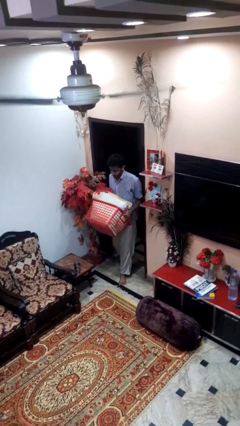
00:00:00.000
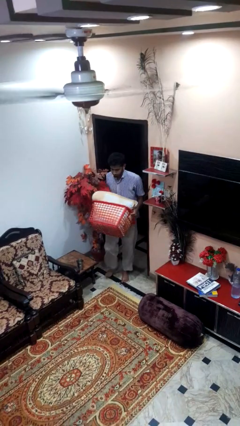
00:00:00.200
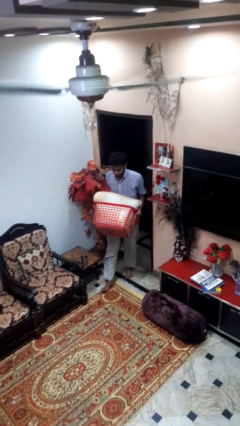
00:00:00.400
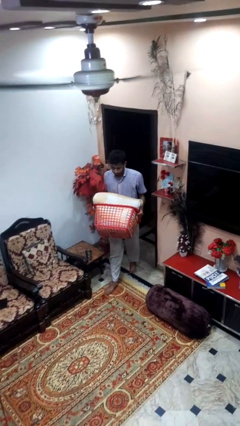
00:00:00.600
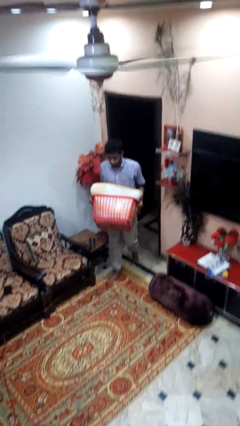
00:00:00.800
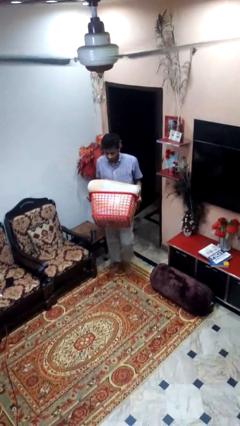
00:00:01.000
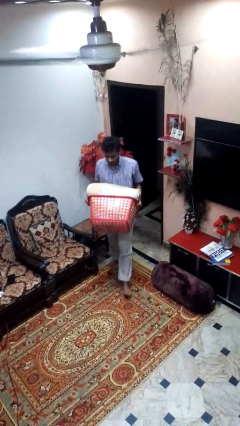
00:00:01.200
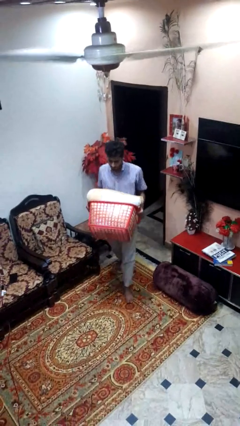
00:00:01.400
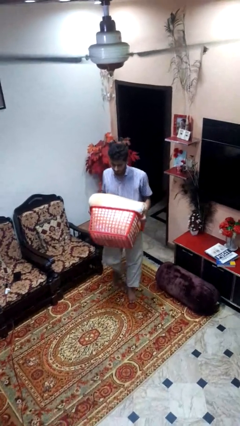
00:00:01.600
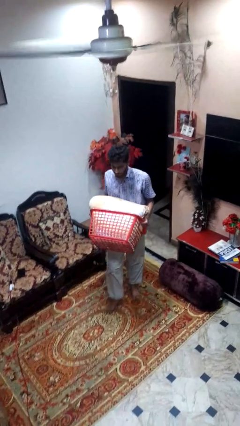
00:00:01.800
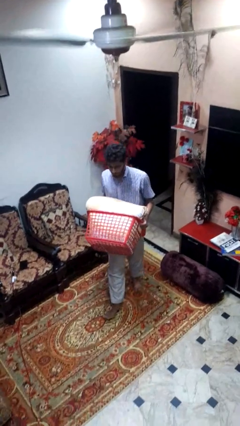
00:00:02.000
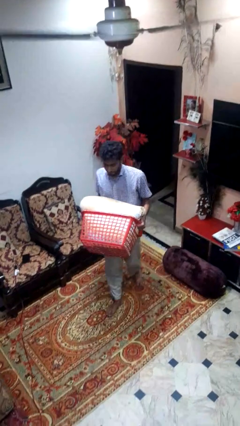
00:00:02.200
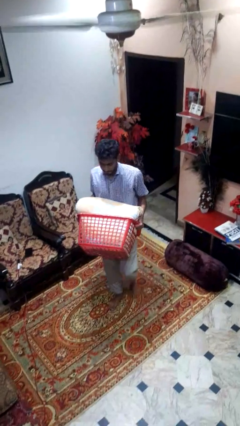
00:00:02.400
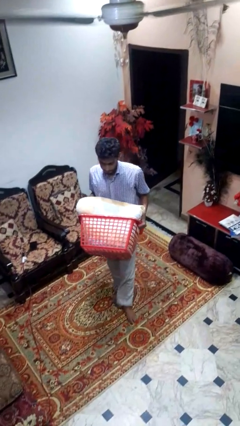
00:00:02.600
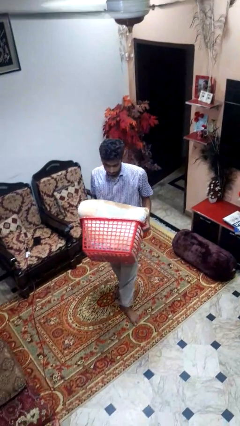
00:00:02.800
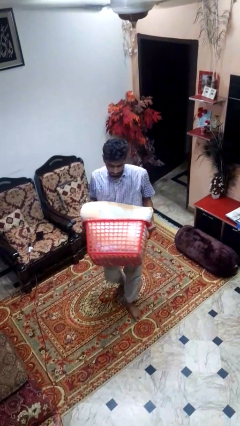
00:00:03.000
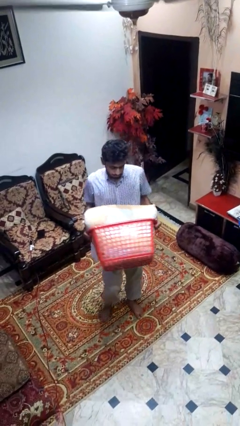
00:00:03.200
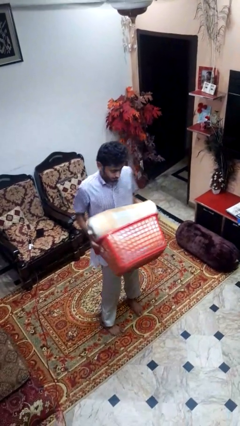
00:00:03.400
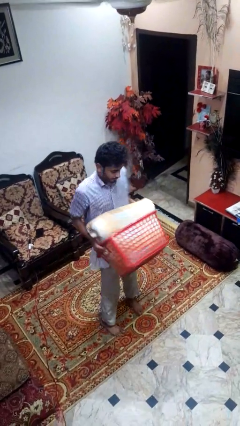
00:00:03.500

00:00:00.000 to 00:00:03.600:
person carries laundry basket

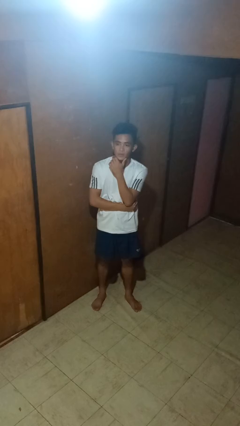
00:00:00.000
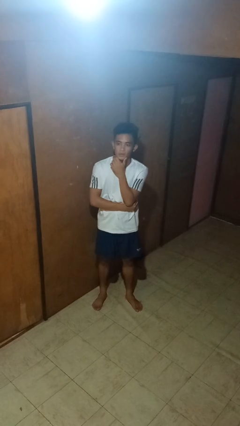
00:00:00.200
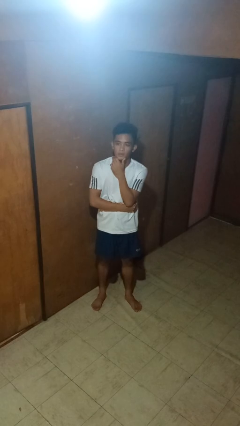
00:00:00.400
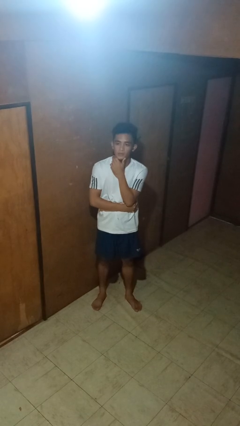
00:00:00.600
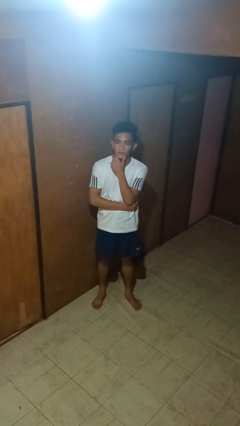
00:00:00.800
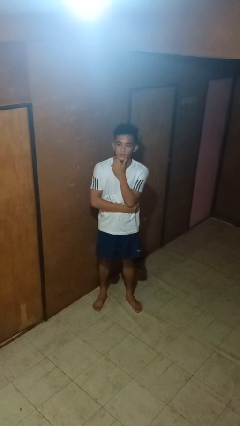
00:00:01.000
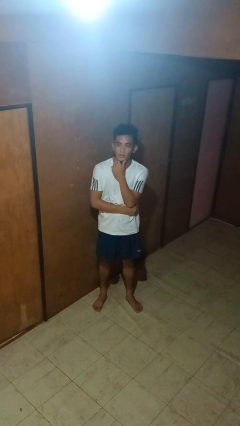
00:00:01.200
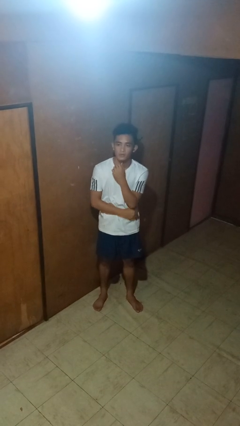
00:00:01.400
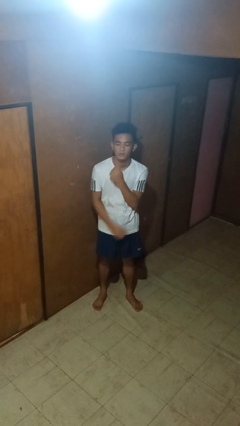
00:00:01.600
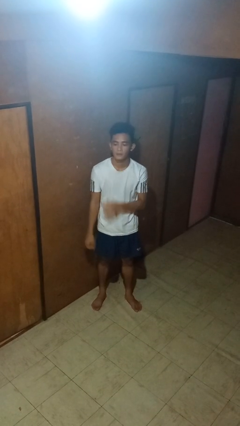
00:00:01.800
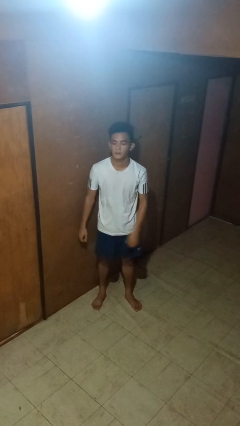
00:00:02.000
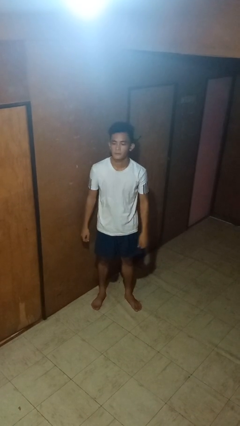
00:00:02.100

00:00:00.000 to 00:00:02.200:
person strokes chin

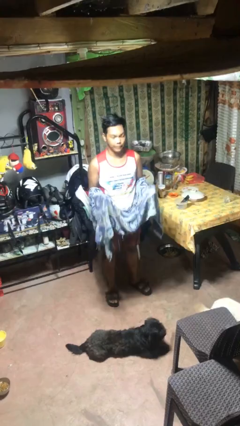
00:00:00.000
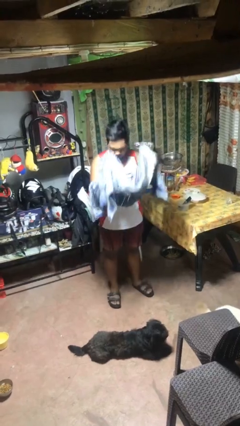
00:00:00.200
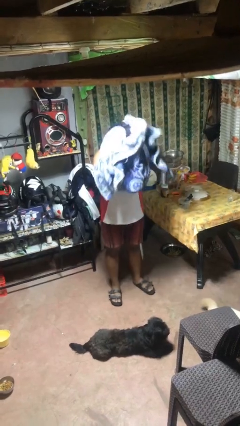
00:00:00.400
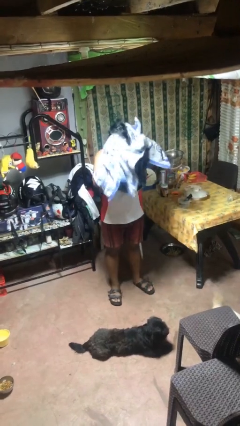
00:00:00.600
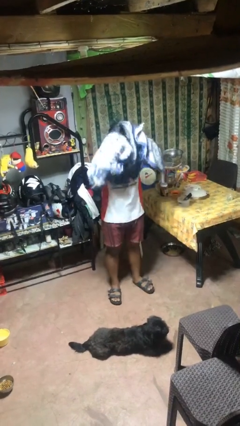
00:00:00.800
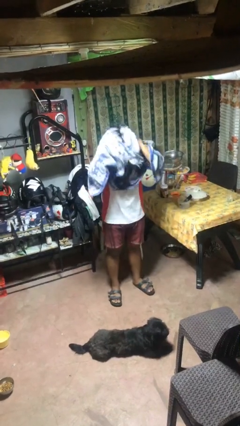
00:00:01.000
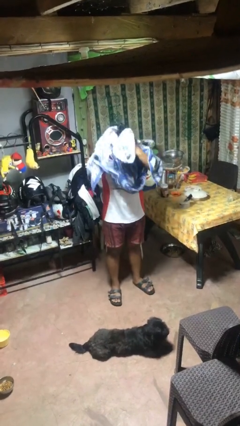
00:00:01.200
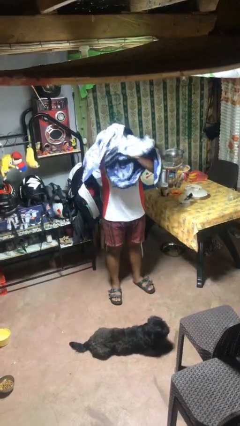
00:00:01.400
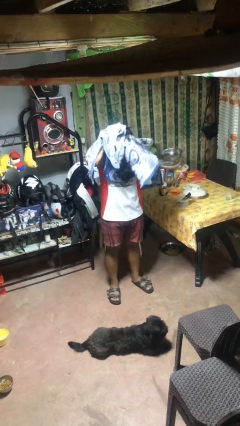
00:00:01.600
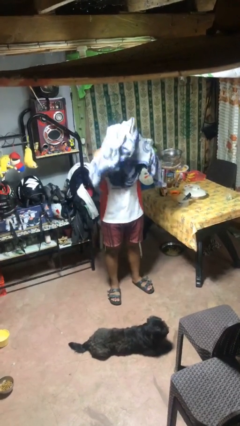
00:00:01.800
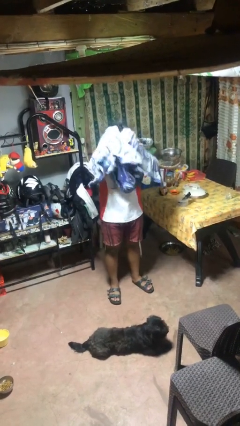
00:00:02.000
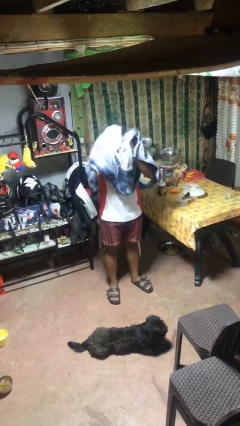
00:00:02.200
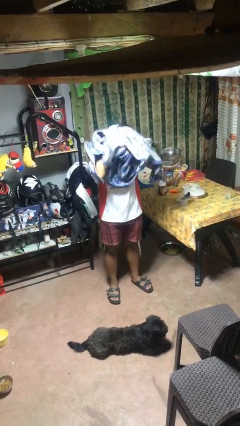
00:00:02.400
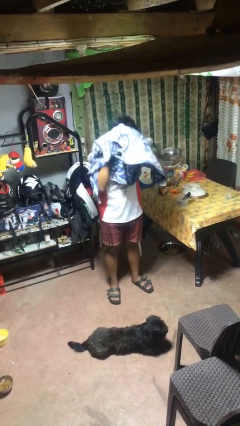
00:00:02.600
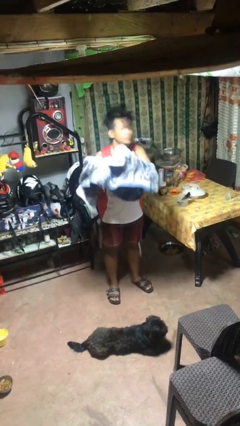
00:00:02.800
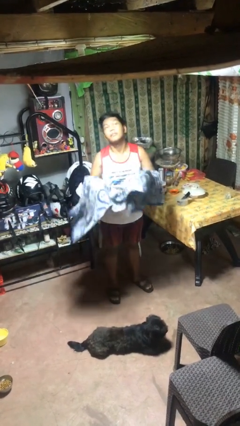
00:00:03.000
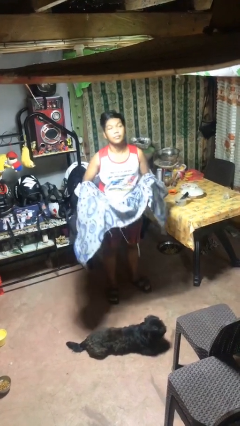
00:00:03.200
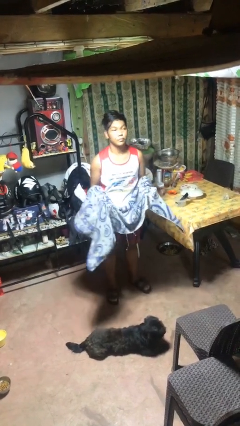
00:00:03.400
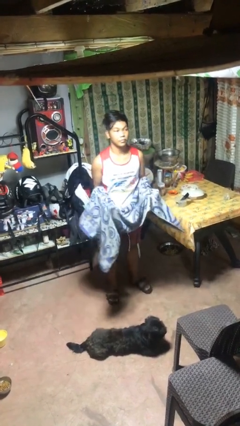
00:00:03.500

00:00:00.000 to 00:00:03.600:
person dries hair with towel

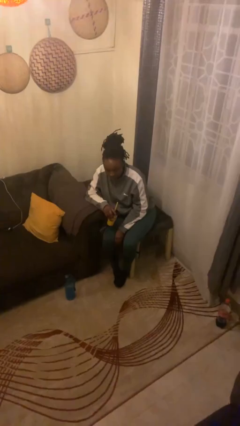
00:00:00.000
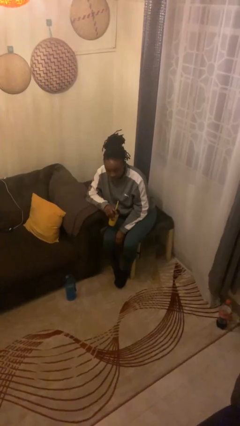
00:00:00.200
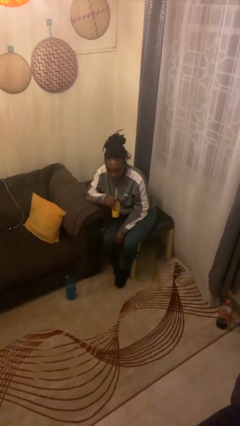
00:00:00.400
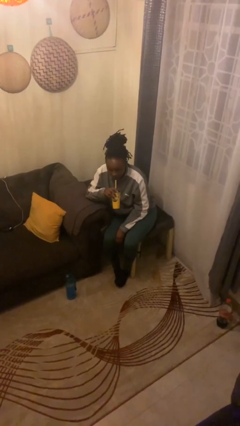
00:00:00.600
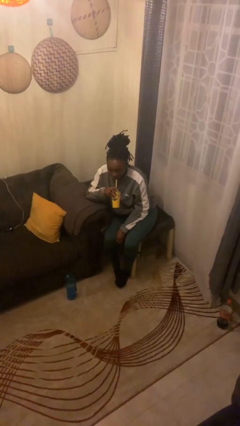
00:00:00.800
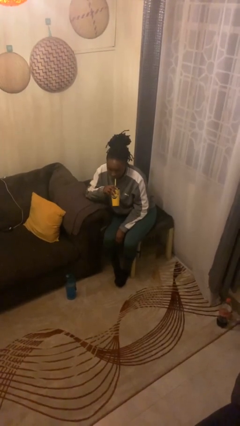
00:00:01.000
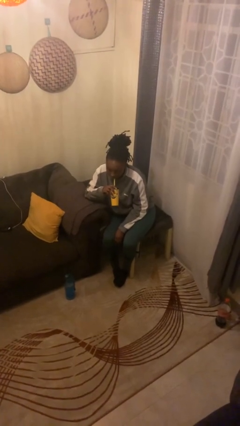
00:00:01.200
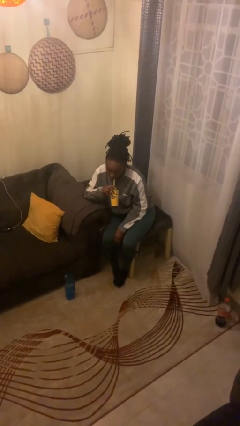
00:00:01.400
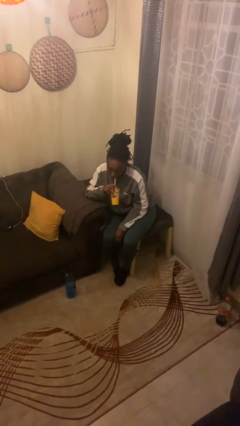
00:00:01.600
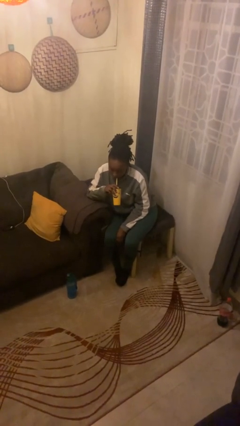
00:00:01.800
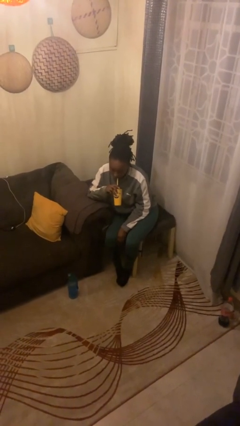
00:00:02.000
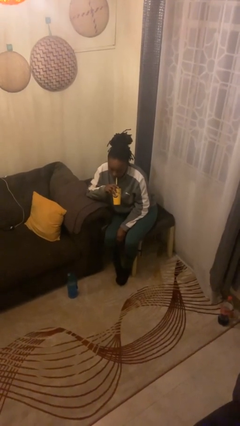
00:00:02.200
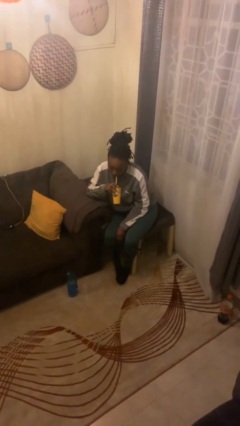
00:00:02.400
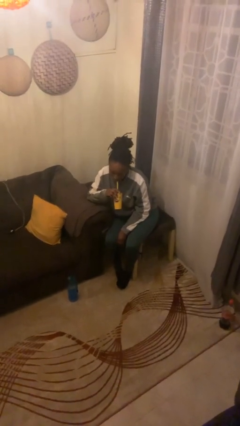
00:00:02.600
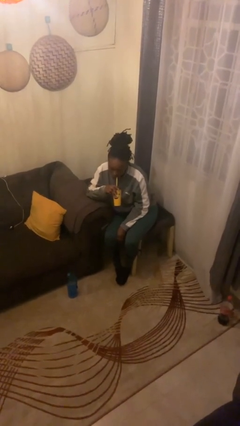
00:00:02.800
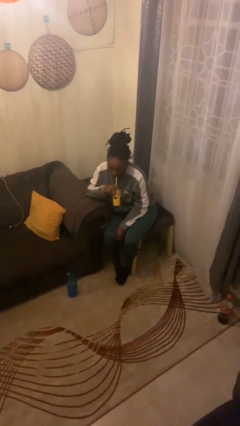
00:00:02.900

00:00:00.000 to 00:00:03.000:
person drinks from straw

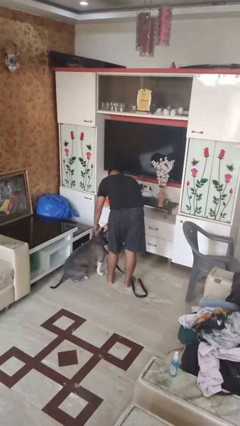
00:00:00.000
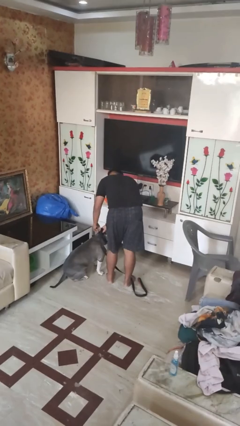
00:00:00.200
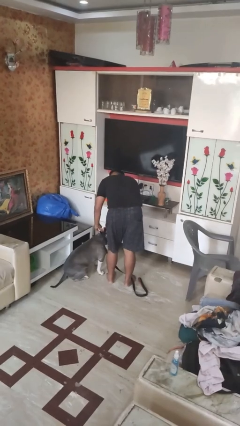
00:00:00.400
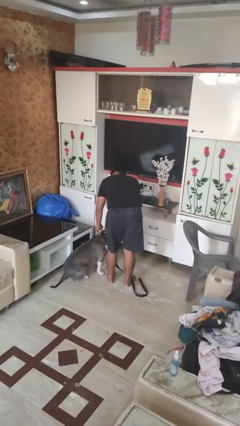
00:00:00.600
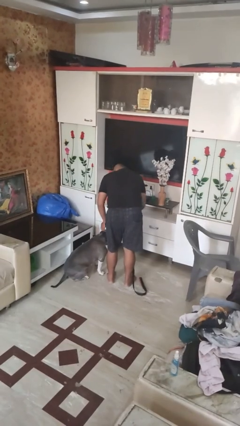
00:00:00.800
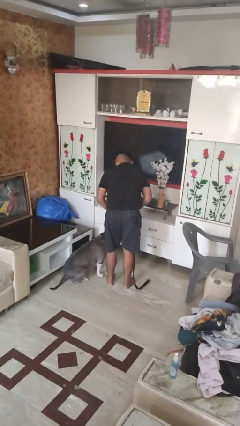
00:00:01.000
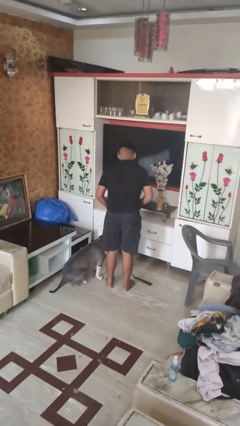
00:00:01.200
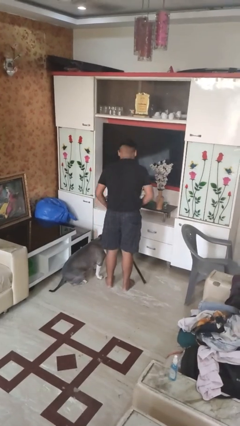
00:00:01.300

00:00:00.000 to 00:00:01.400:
person attaches leash to dog

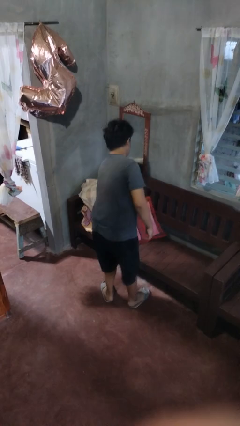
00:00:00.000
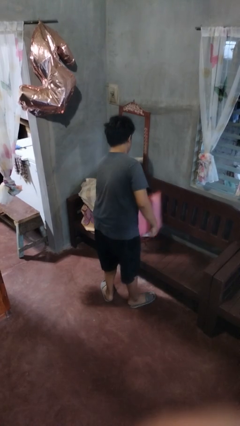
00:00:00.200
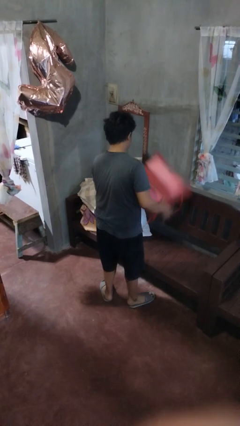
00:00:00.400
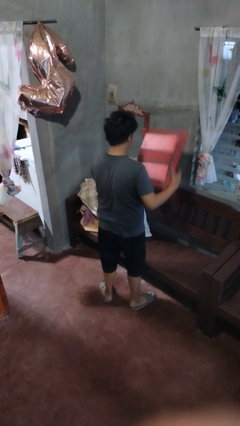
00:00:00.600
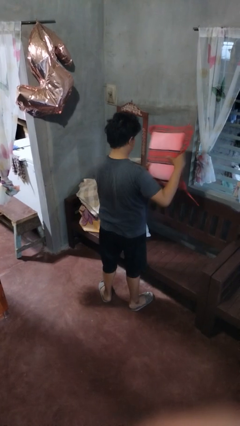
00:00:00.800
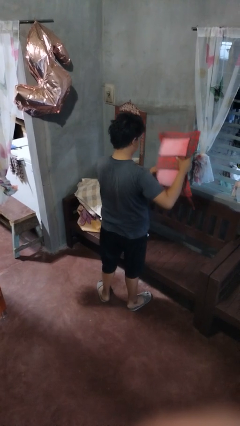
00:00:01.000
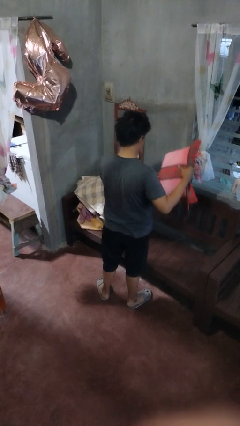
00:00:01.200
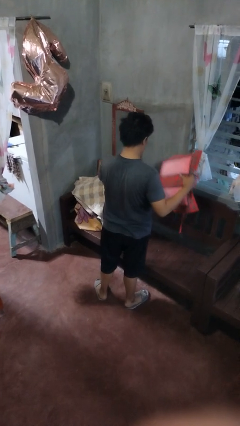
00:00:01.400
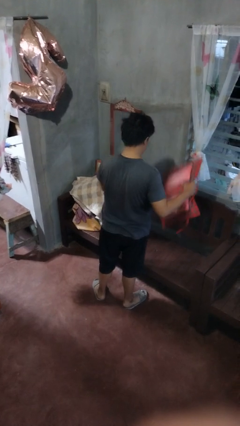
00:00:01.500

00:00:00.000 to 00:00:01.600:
person picks up object from couch

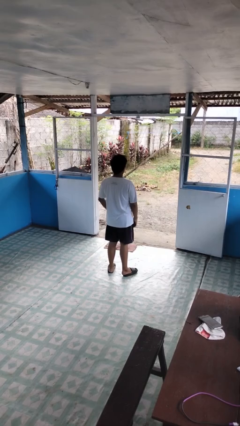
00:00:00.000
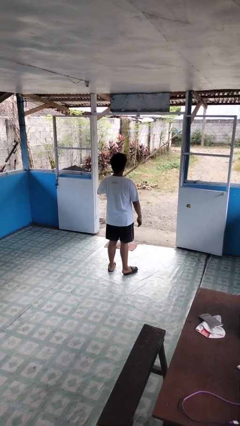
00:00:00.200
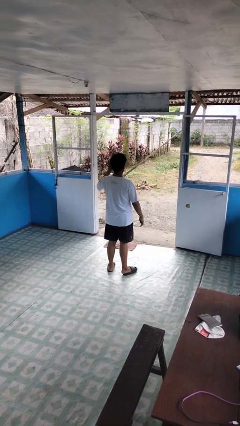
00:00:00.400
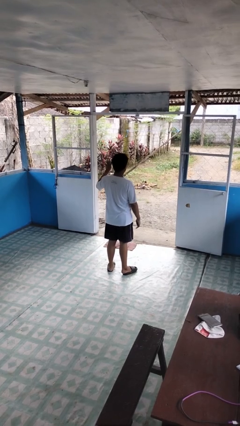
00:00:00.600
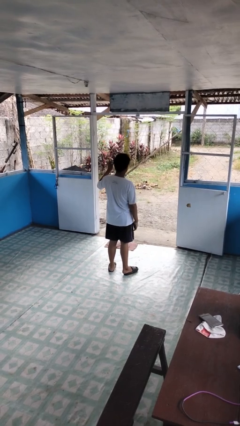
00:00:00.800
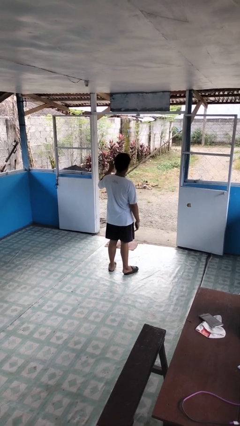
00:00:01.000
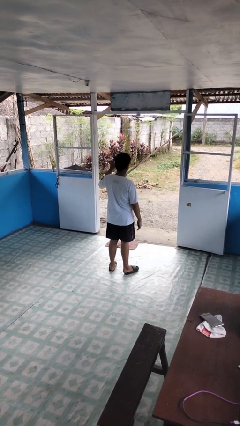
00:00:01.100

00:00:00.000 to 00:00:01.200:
person gestures number four

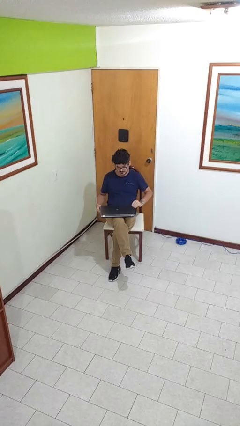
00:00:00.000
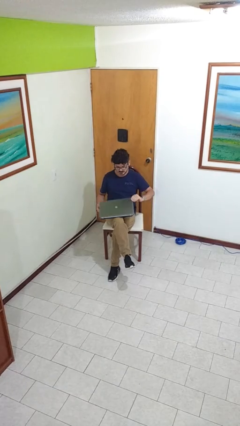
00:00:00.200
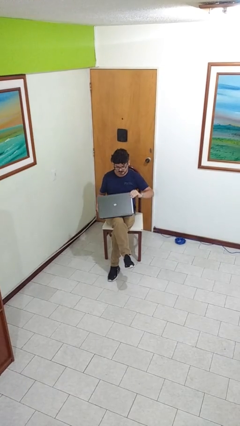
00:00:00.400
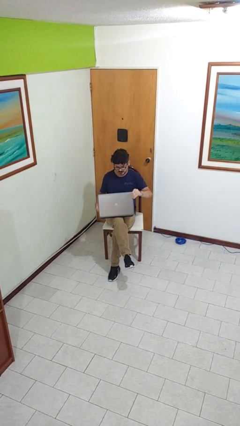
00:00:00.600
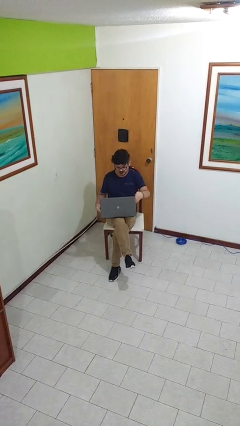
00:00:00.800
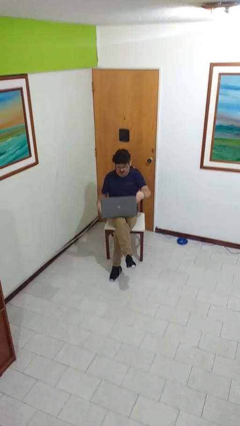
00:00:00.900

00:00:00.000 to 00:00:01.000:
person opens laptop
